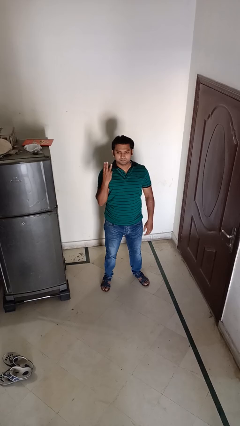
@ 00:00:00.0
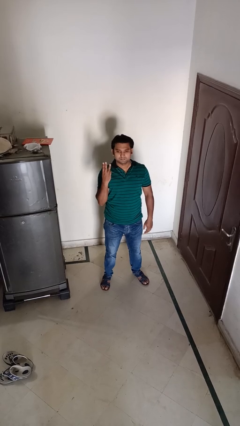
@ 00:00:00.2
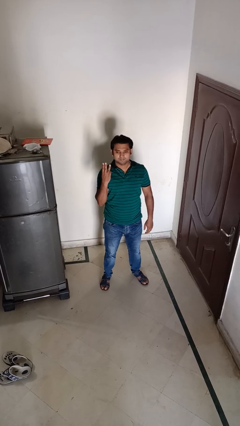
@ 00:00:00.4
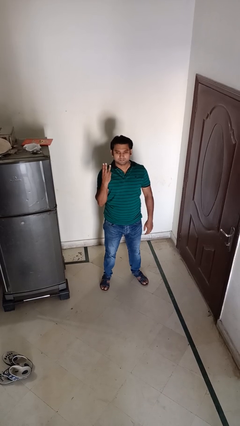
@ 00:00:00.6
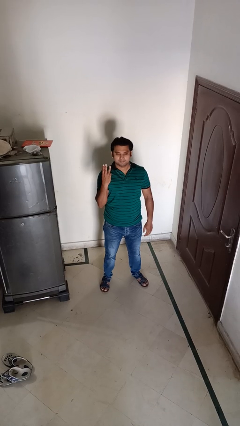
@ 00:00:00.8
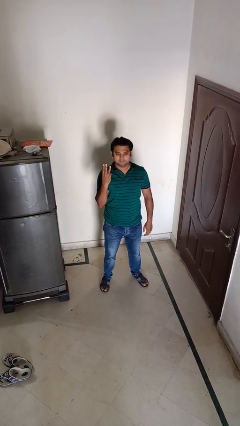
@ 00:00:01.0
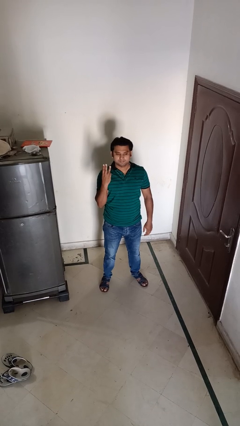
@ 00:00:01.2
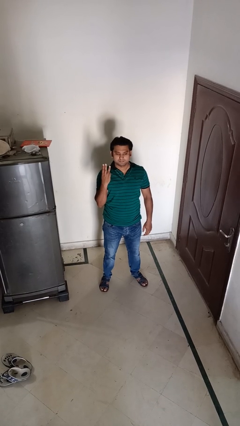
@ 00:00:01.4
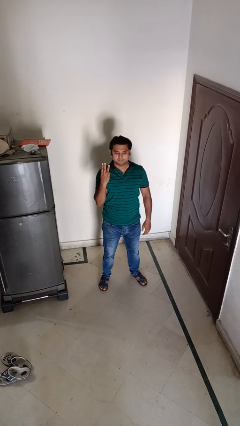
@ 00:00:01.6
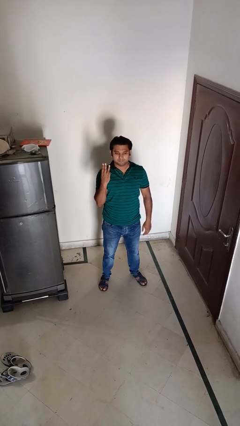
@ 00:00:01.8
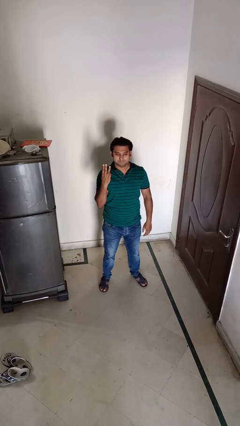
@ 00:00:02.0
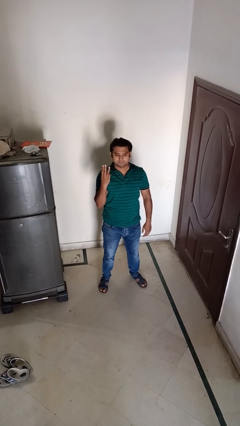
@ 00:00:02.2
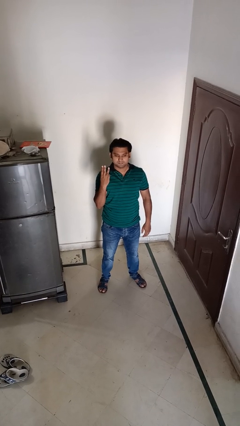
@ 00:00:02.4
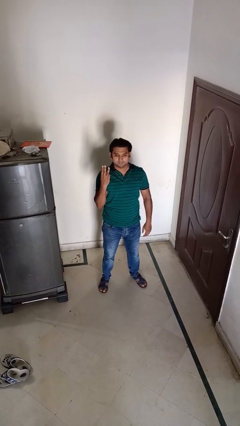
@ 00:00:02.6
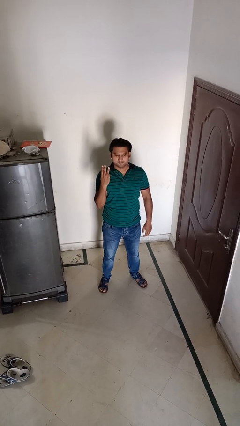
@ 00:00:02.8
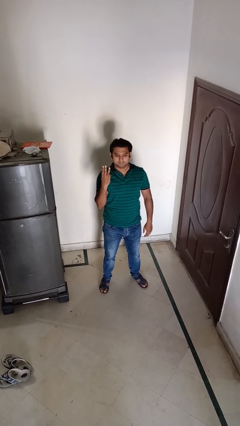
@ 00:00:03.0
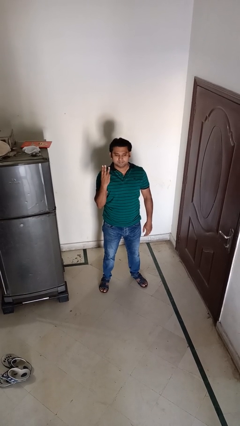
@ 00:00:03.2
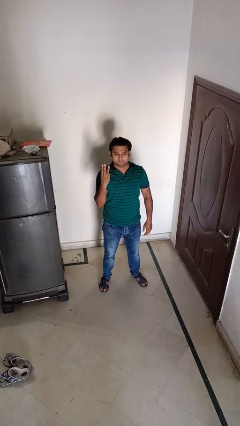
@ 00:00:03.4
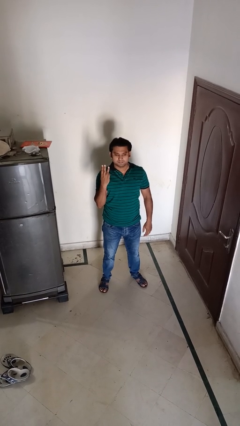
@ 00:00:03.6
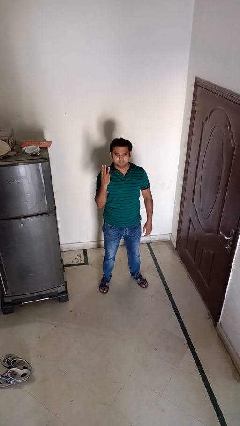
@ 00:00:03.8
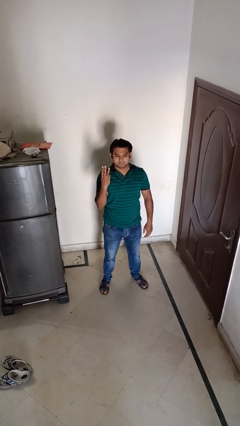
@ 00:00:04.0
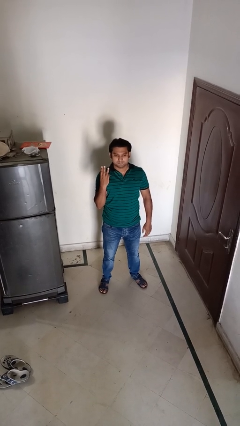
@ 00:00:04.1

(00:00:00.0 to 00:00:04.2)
person gestures number three

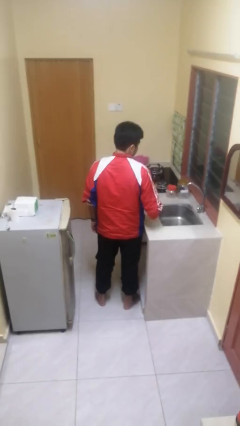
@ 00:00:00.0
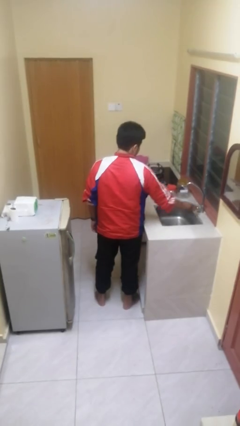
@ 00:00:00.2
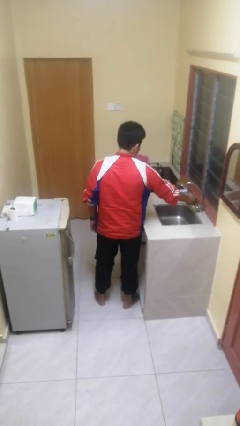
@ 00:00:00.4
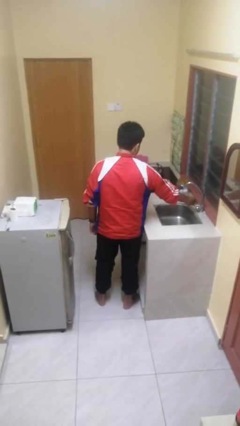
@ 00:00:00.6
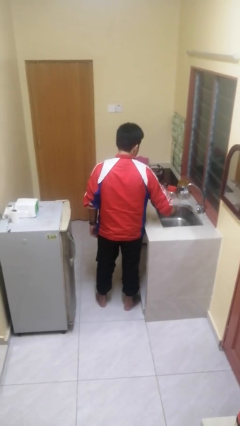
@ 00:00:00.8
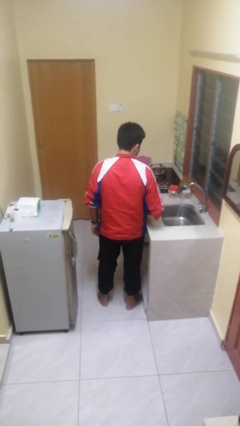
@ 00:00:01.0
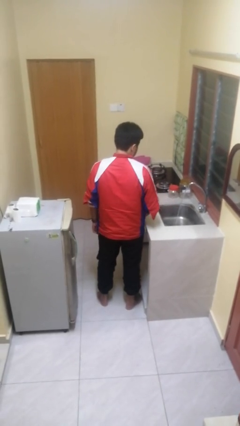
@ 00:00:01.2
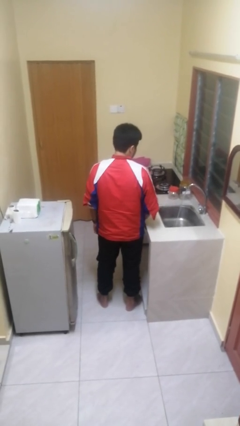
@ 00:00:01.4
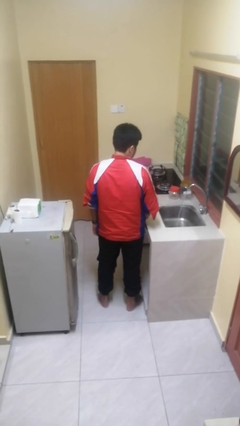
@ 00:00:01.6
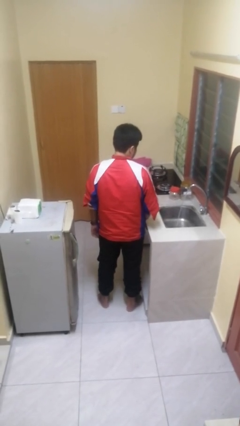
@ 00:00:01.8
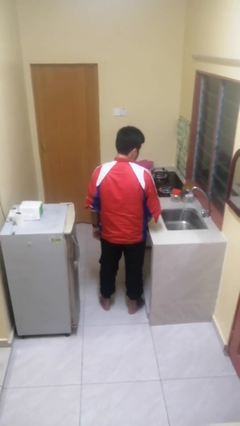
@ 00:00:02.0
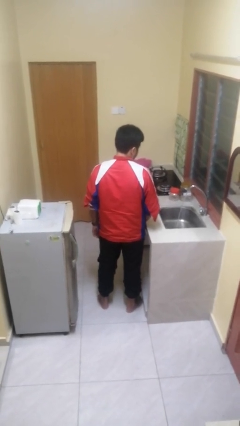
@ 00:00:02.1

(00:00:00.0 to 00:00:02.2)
person turns on faucet

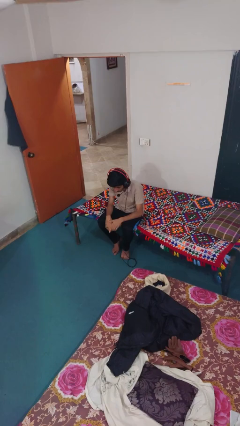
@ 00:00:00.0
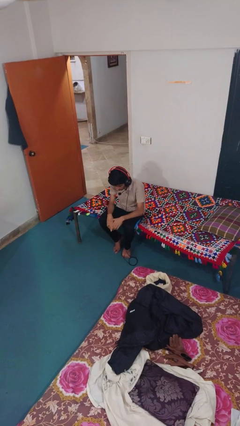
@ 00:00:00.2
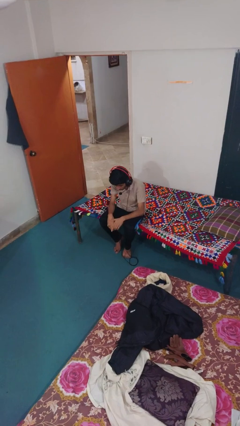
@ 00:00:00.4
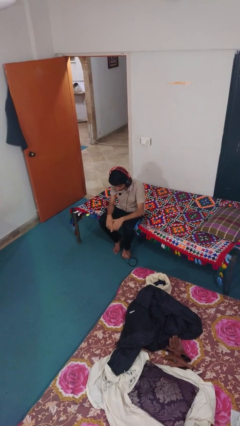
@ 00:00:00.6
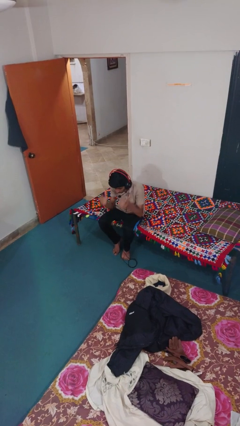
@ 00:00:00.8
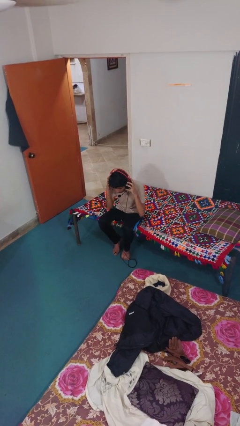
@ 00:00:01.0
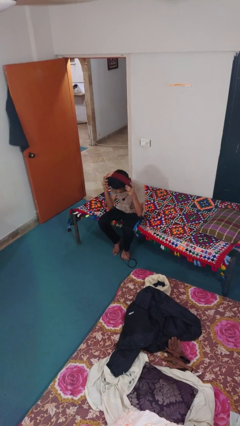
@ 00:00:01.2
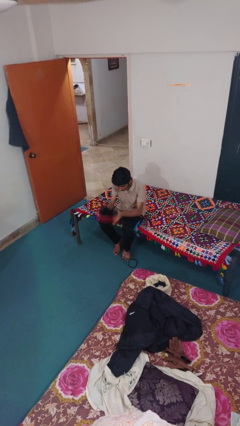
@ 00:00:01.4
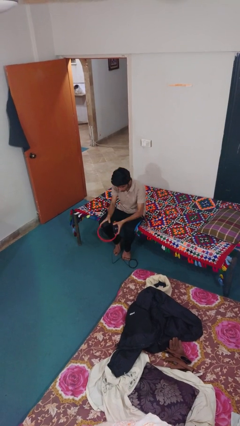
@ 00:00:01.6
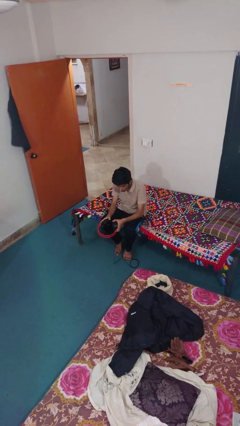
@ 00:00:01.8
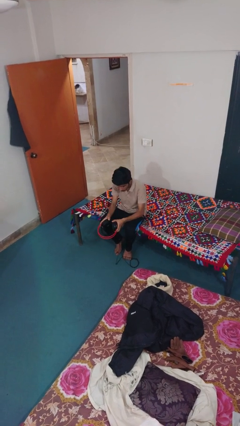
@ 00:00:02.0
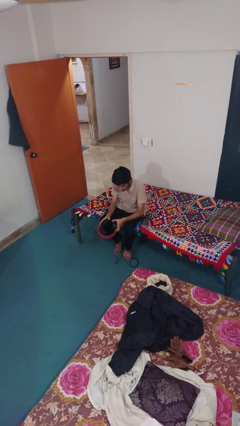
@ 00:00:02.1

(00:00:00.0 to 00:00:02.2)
person takes off headphones

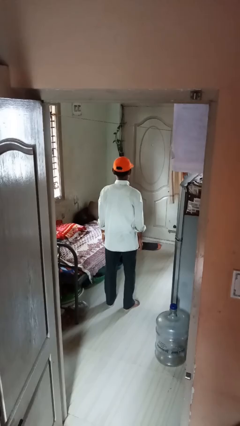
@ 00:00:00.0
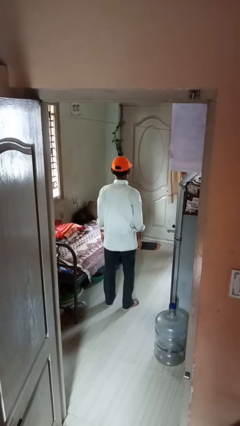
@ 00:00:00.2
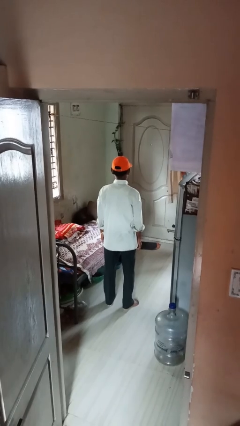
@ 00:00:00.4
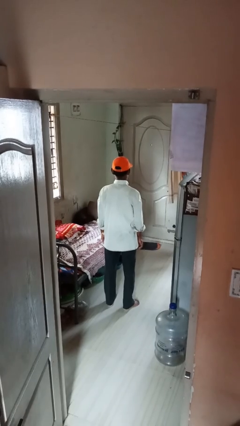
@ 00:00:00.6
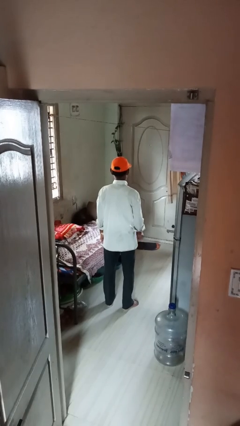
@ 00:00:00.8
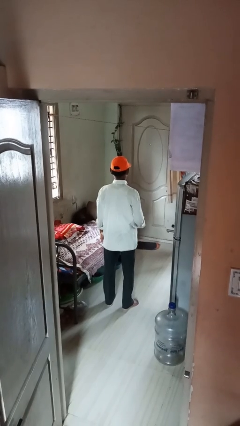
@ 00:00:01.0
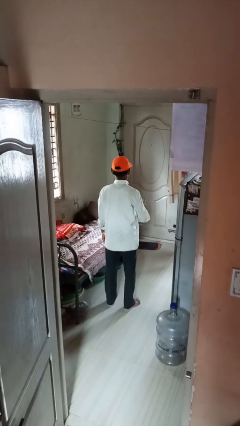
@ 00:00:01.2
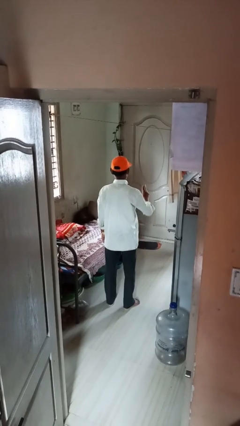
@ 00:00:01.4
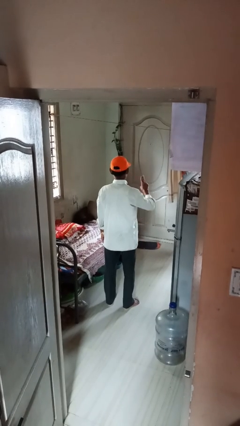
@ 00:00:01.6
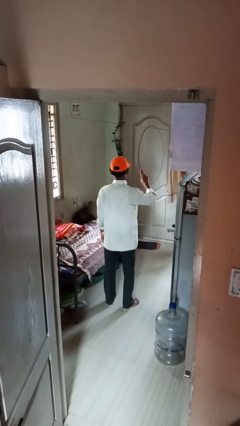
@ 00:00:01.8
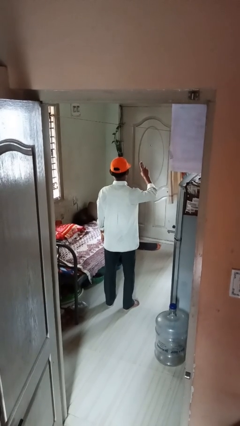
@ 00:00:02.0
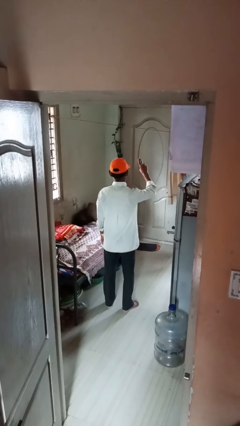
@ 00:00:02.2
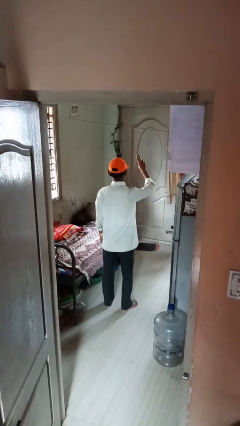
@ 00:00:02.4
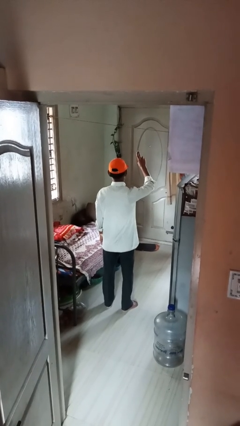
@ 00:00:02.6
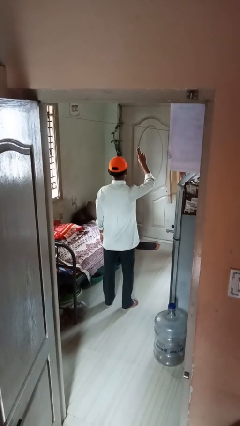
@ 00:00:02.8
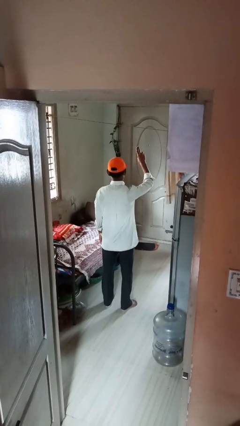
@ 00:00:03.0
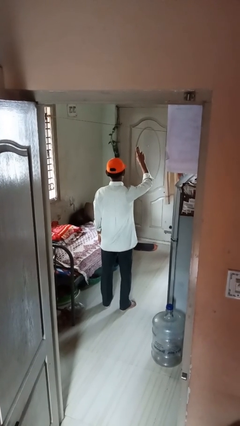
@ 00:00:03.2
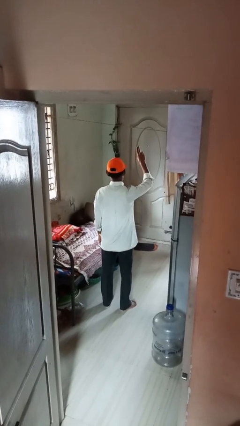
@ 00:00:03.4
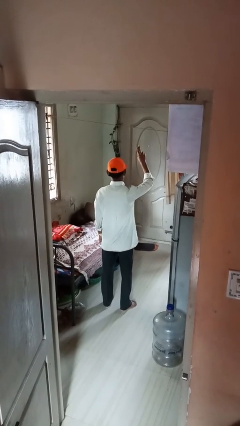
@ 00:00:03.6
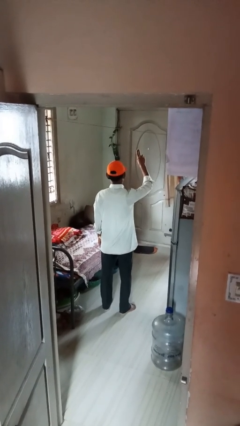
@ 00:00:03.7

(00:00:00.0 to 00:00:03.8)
person gestures swipe up

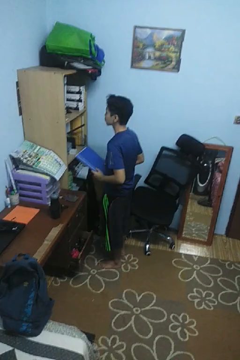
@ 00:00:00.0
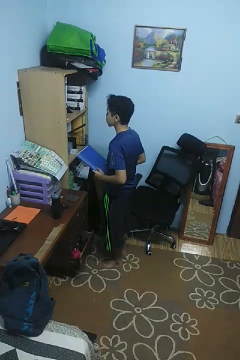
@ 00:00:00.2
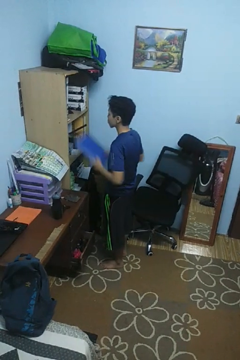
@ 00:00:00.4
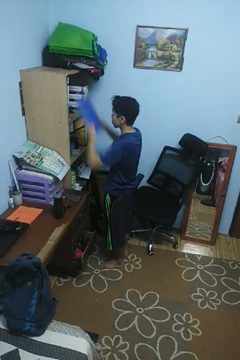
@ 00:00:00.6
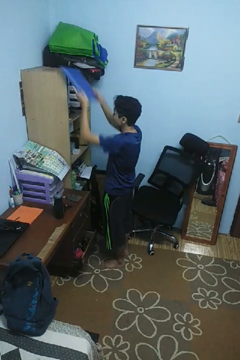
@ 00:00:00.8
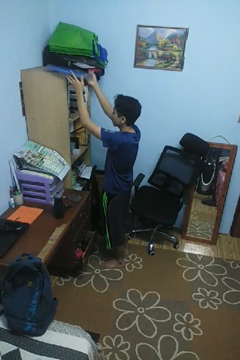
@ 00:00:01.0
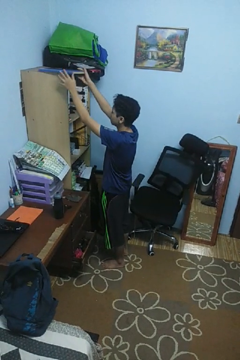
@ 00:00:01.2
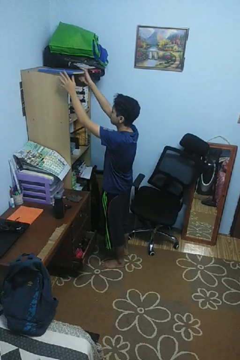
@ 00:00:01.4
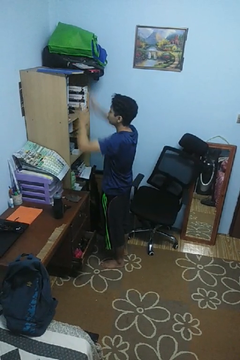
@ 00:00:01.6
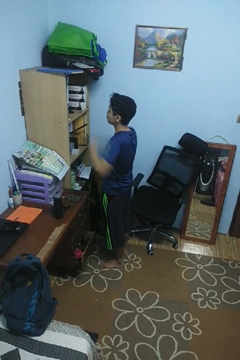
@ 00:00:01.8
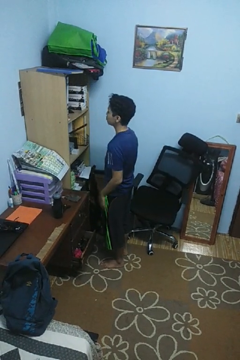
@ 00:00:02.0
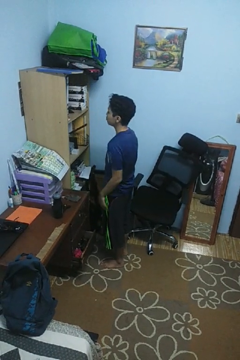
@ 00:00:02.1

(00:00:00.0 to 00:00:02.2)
person puts down object on shelf

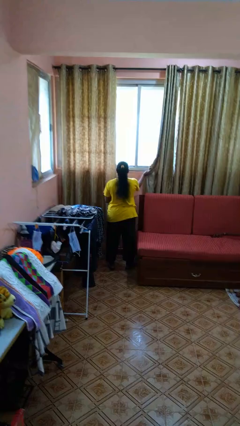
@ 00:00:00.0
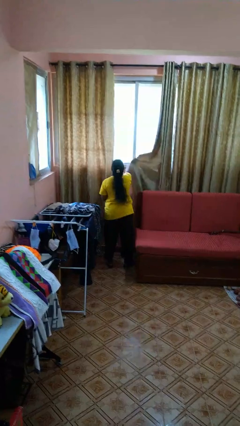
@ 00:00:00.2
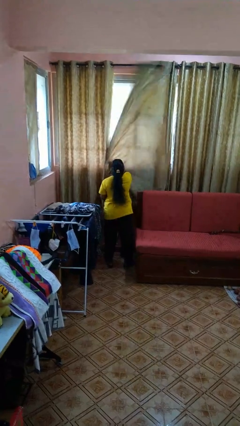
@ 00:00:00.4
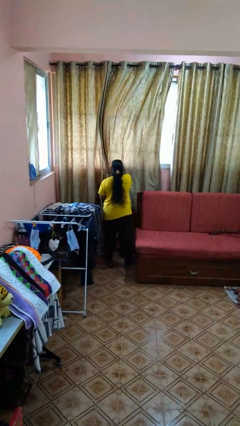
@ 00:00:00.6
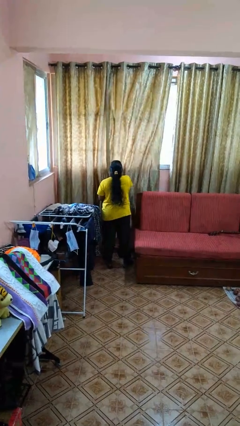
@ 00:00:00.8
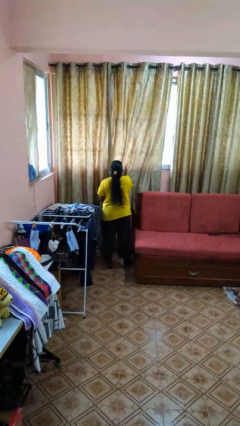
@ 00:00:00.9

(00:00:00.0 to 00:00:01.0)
person closes curtains

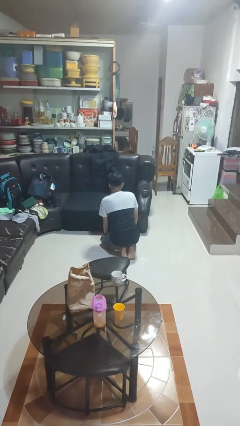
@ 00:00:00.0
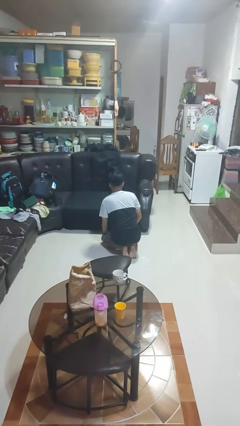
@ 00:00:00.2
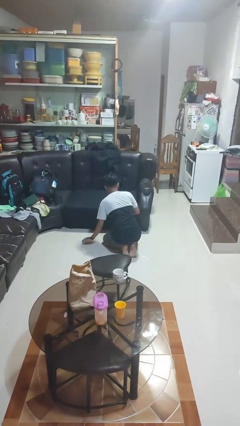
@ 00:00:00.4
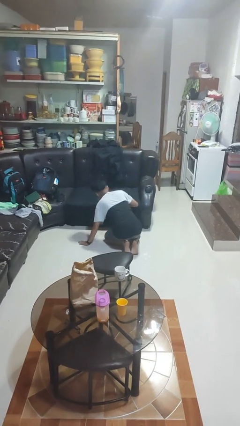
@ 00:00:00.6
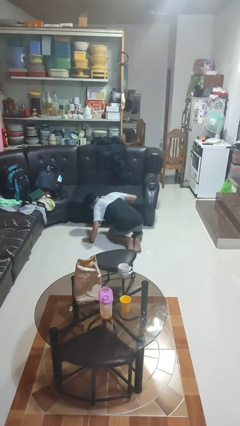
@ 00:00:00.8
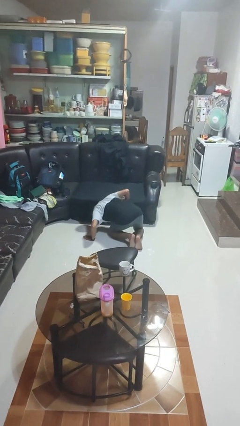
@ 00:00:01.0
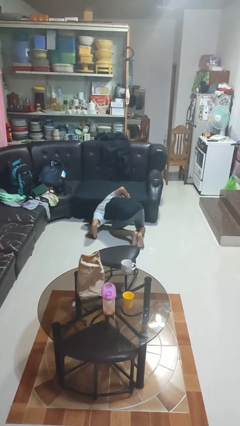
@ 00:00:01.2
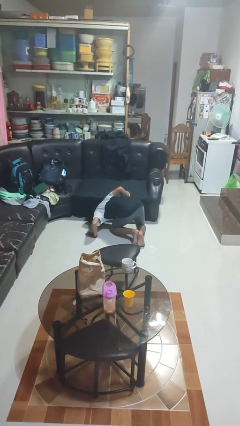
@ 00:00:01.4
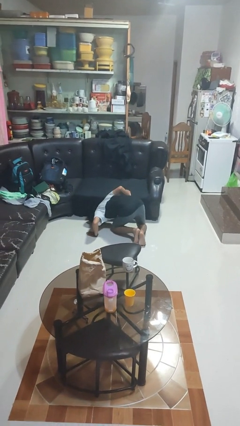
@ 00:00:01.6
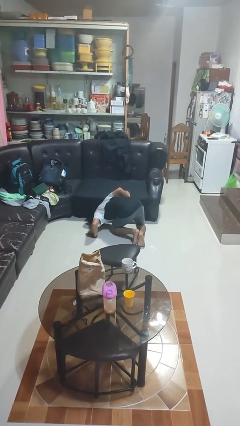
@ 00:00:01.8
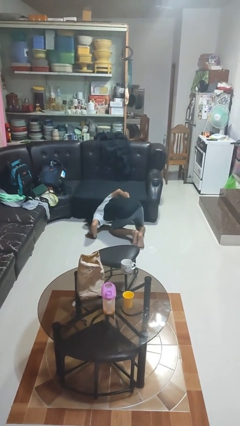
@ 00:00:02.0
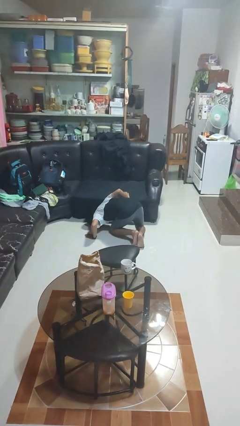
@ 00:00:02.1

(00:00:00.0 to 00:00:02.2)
person searches under couch
